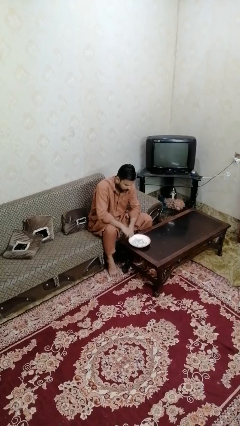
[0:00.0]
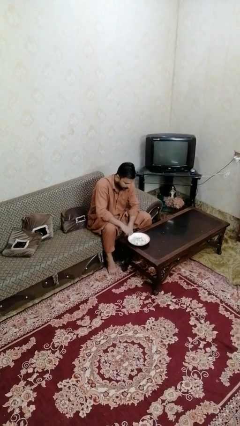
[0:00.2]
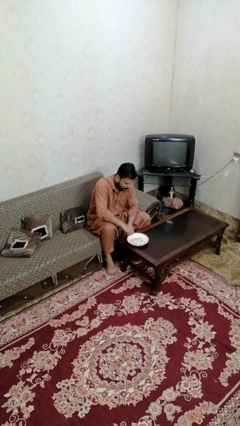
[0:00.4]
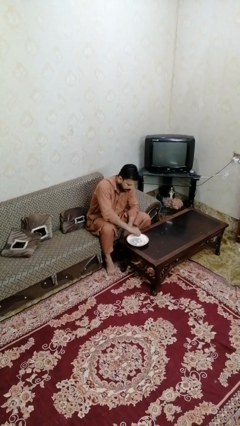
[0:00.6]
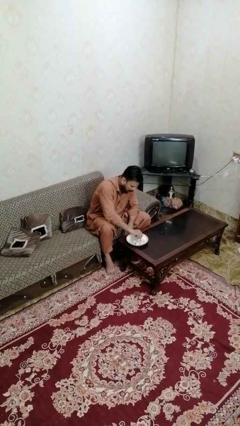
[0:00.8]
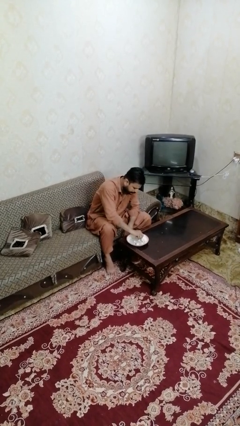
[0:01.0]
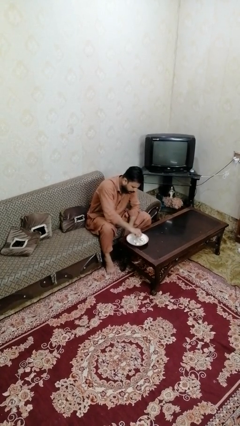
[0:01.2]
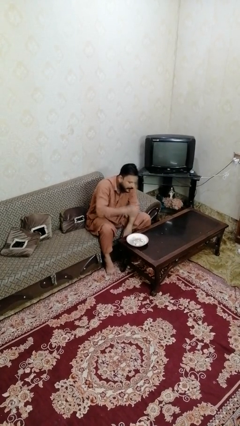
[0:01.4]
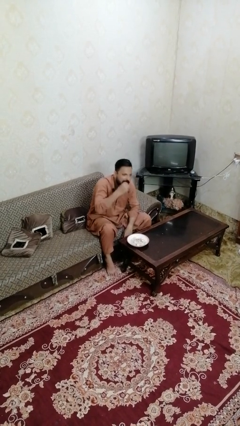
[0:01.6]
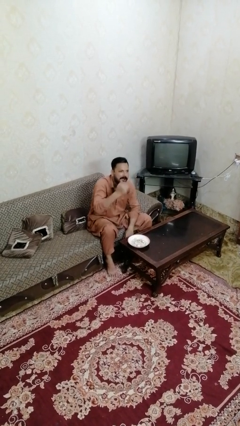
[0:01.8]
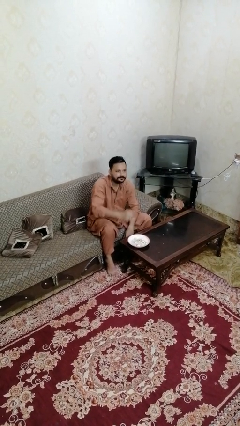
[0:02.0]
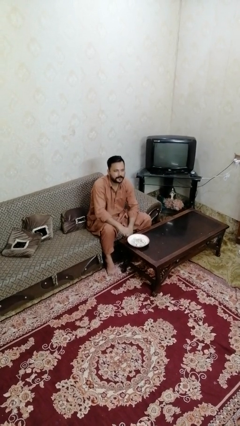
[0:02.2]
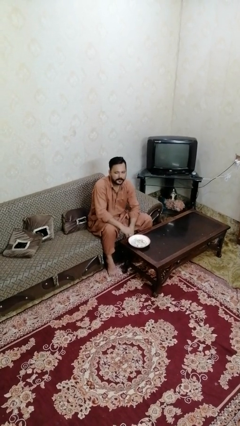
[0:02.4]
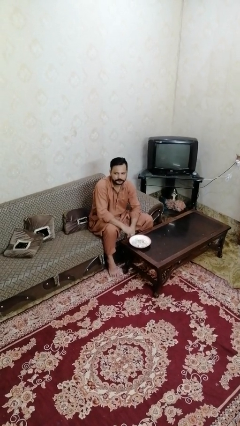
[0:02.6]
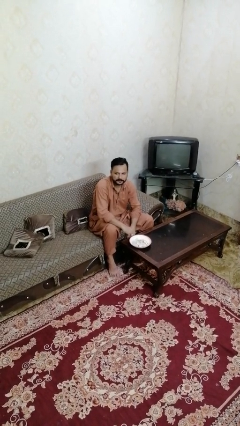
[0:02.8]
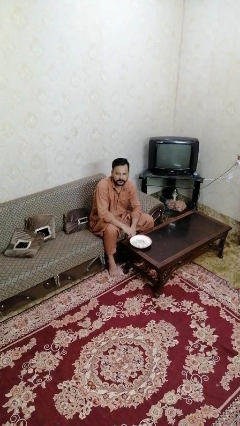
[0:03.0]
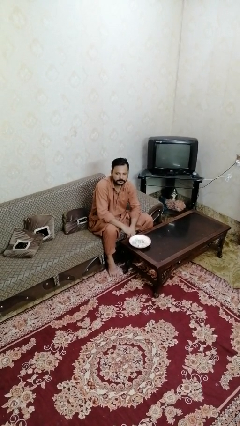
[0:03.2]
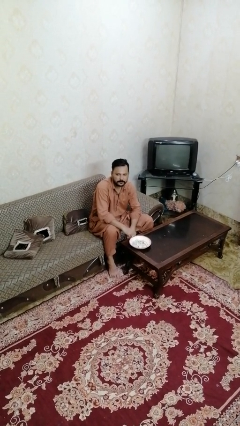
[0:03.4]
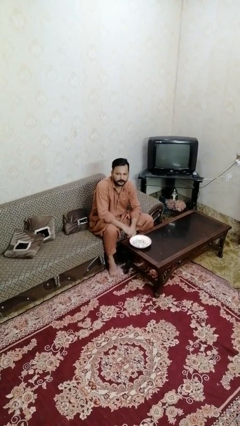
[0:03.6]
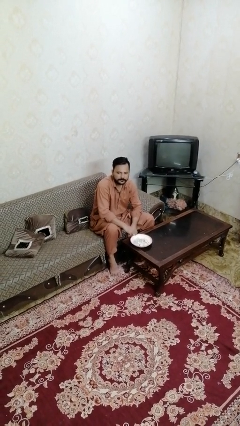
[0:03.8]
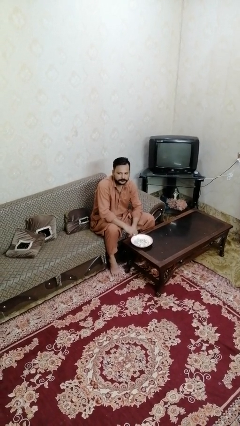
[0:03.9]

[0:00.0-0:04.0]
person eats with hands

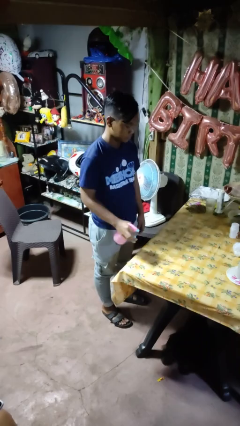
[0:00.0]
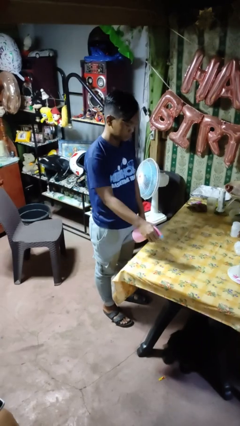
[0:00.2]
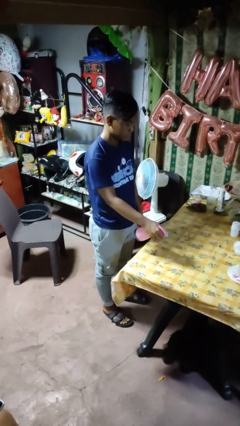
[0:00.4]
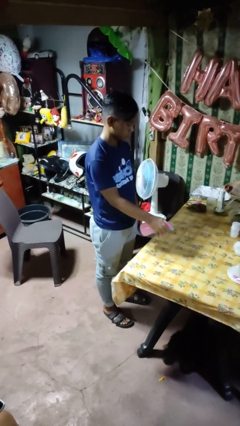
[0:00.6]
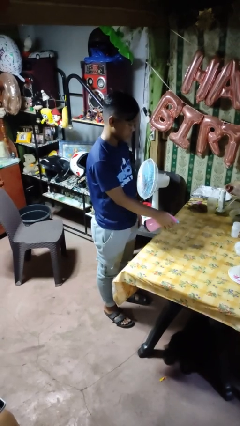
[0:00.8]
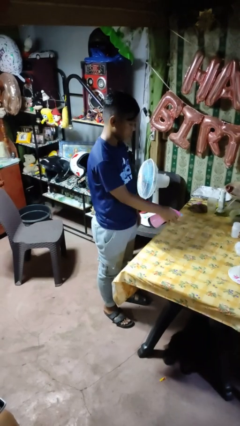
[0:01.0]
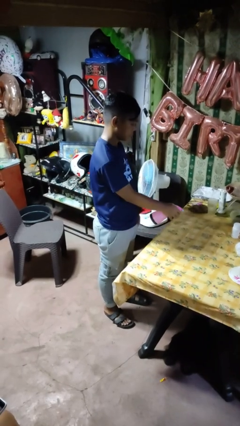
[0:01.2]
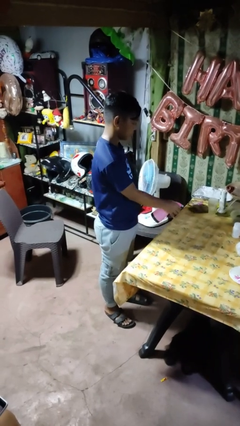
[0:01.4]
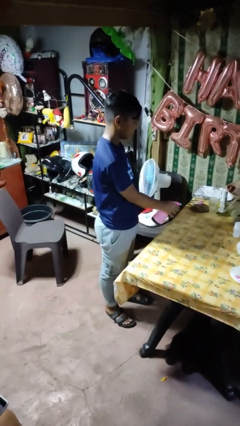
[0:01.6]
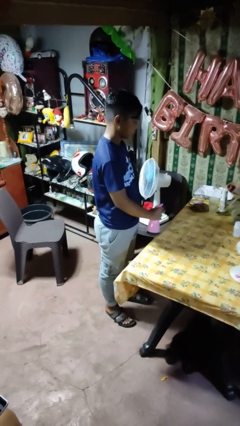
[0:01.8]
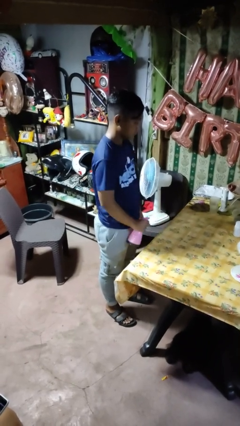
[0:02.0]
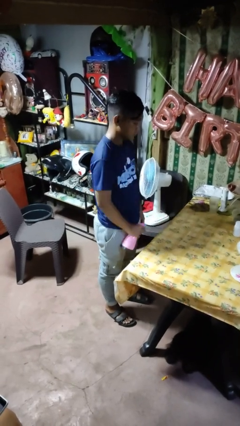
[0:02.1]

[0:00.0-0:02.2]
person sprays from bottle

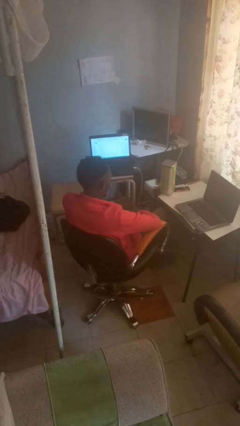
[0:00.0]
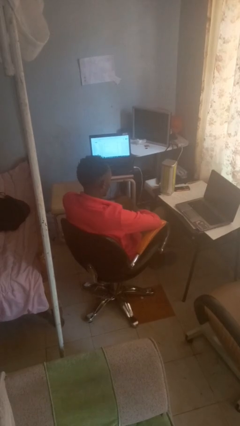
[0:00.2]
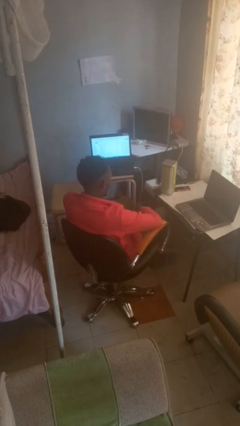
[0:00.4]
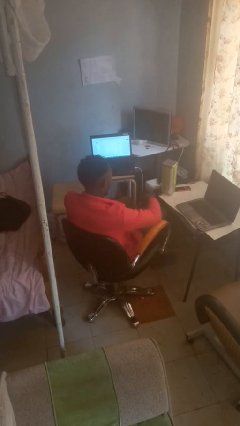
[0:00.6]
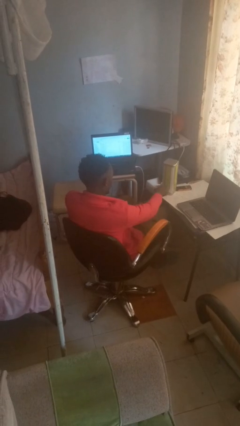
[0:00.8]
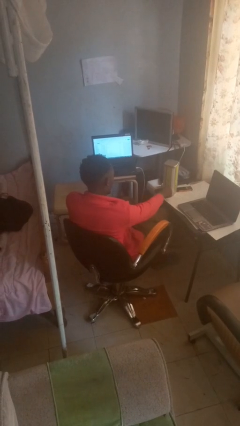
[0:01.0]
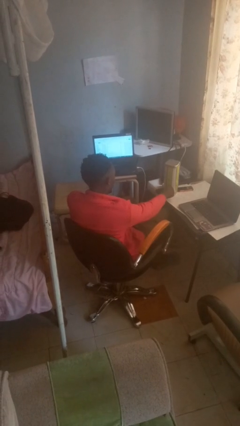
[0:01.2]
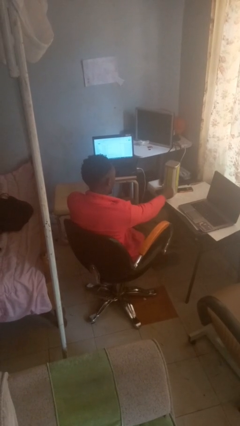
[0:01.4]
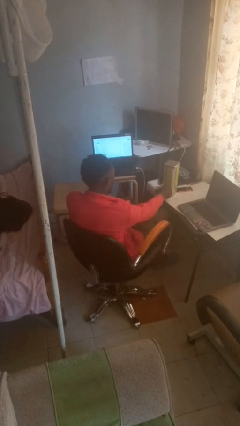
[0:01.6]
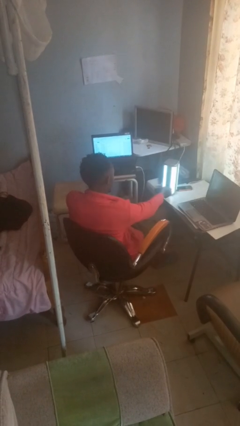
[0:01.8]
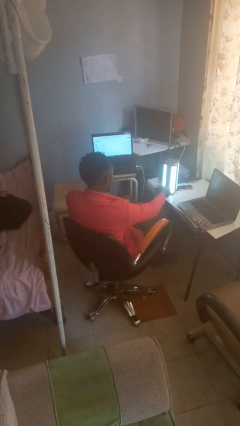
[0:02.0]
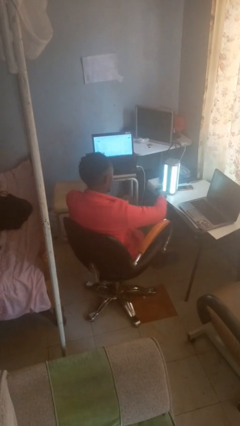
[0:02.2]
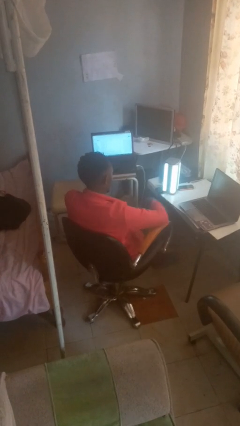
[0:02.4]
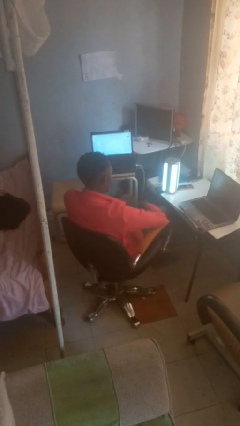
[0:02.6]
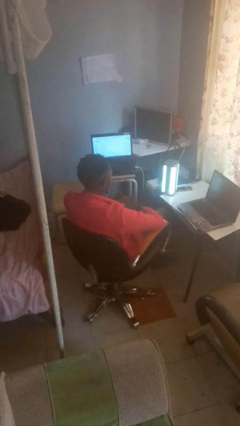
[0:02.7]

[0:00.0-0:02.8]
person turns on lamp

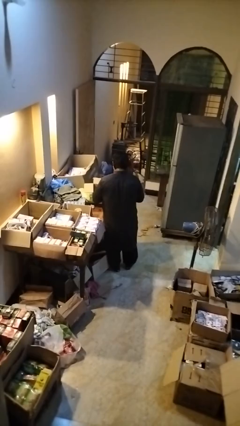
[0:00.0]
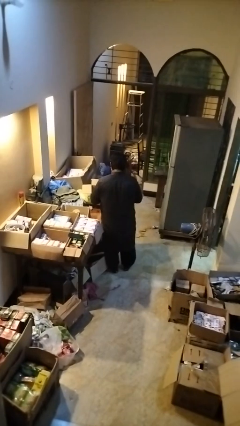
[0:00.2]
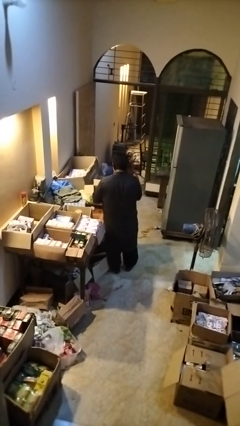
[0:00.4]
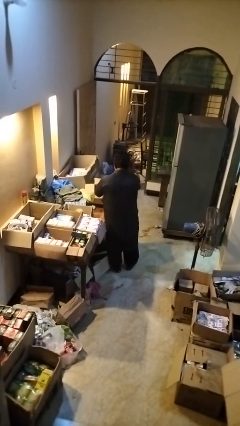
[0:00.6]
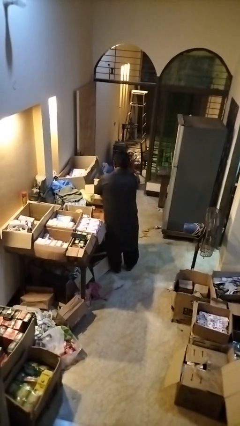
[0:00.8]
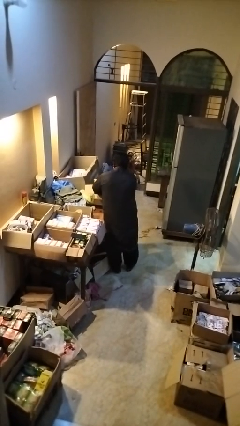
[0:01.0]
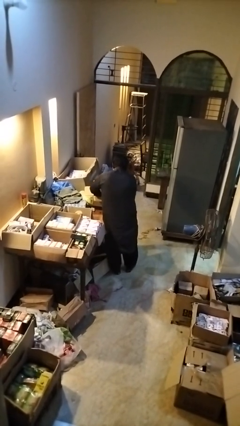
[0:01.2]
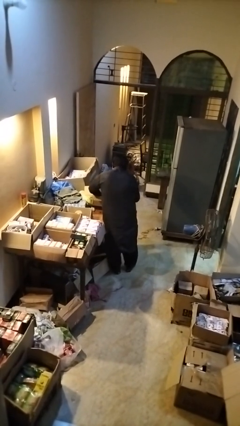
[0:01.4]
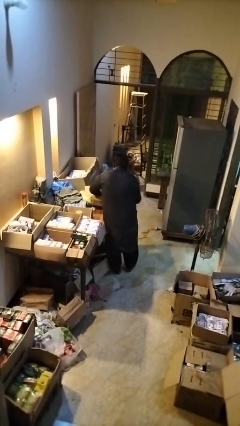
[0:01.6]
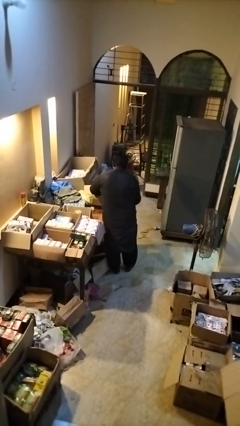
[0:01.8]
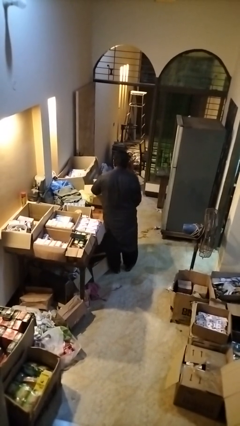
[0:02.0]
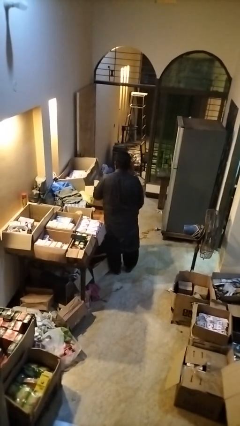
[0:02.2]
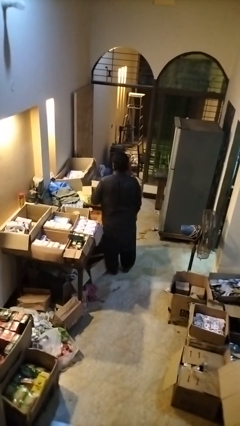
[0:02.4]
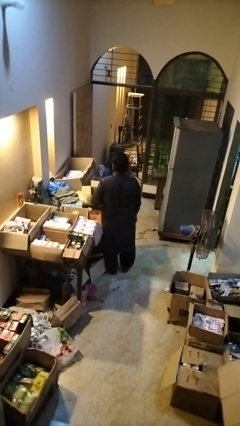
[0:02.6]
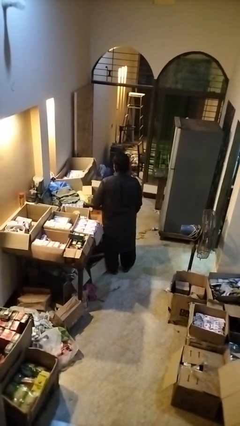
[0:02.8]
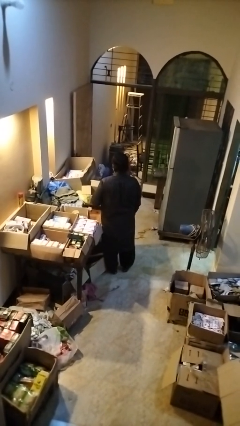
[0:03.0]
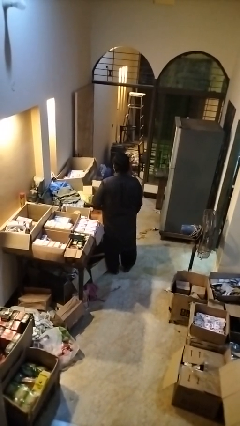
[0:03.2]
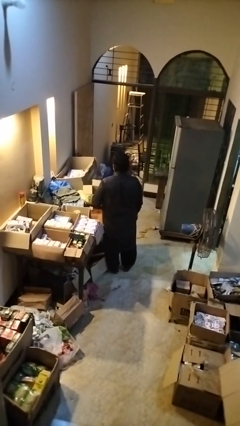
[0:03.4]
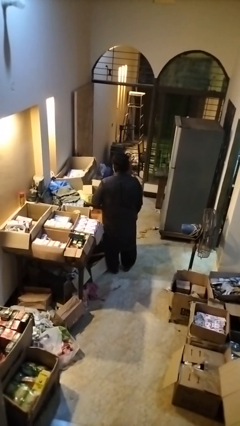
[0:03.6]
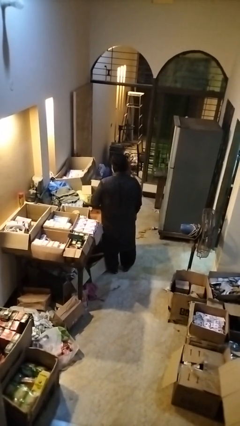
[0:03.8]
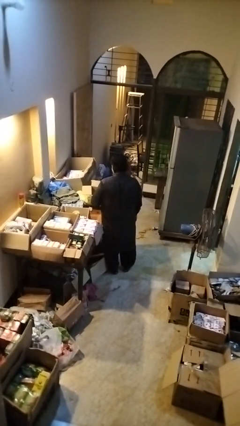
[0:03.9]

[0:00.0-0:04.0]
person takes object from box

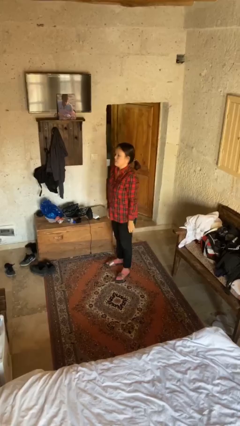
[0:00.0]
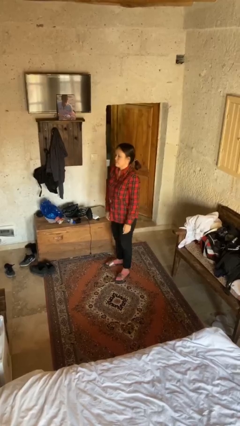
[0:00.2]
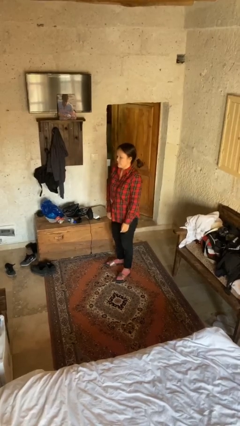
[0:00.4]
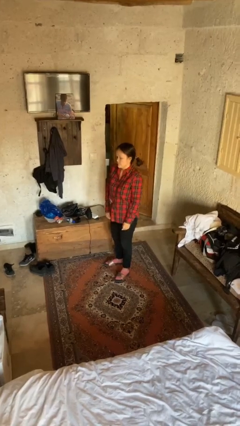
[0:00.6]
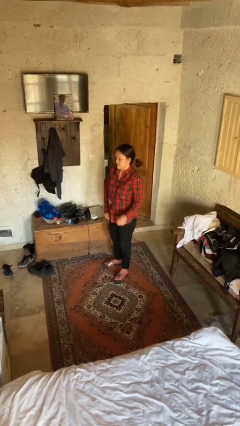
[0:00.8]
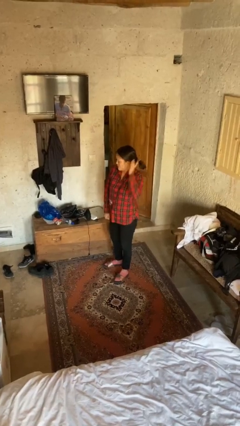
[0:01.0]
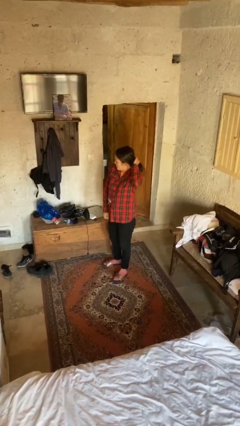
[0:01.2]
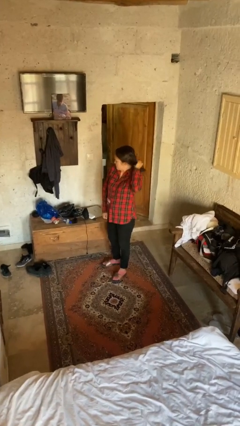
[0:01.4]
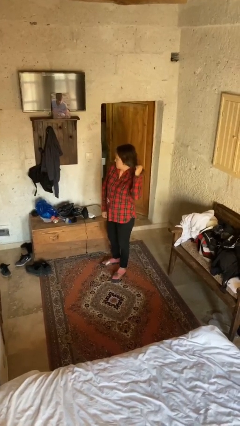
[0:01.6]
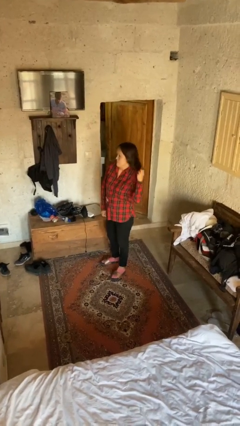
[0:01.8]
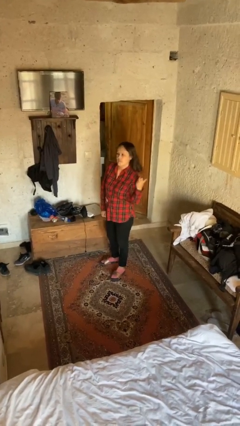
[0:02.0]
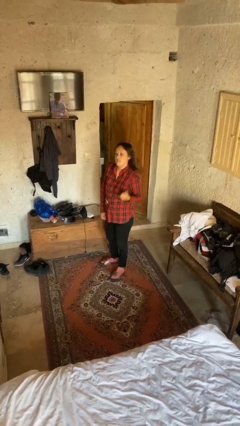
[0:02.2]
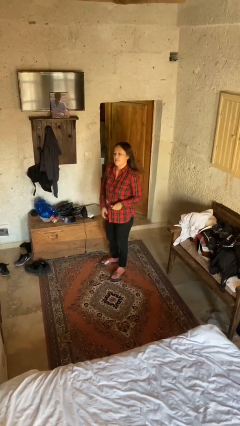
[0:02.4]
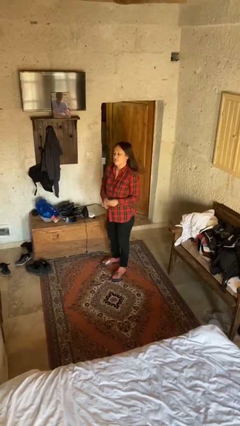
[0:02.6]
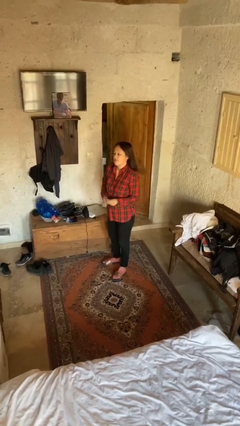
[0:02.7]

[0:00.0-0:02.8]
person takes off hairtie

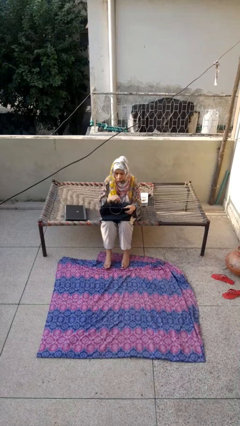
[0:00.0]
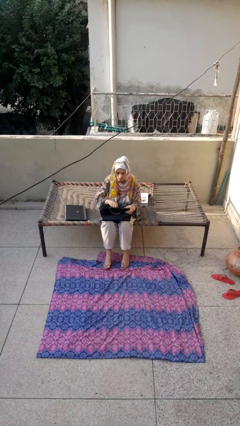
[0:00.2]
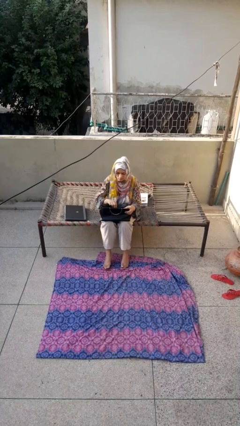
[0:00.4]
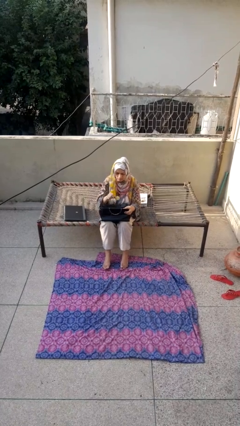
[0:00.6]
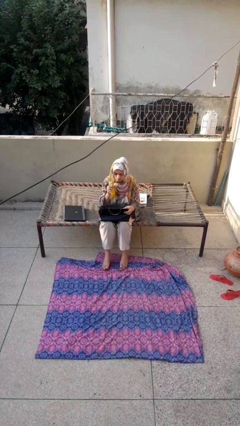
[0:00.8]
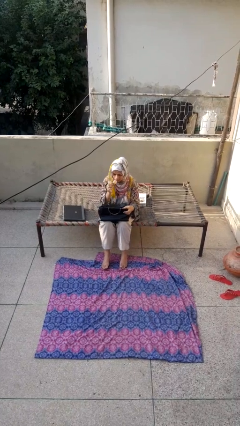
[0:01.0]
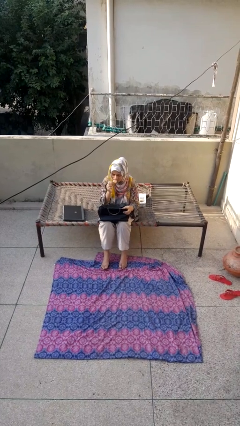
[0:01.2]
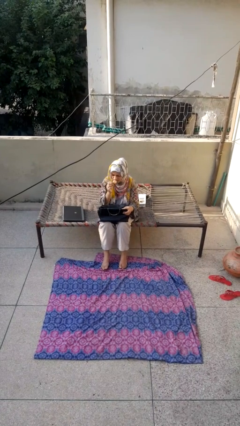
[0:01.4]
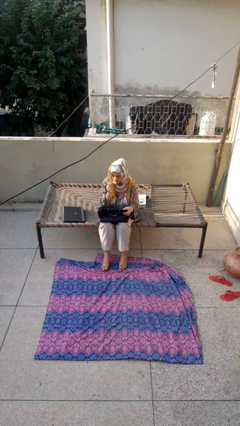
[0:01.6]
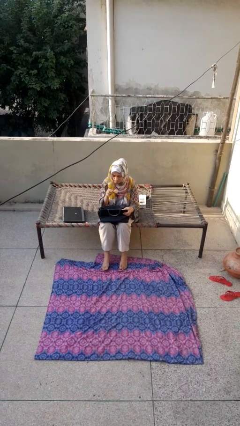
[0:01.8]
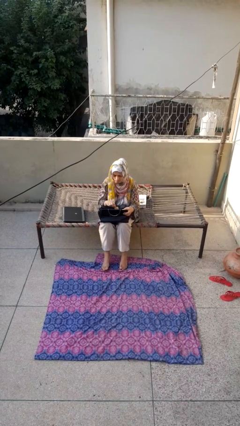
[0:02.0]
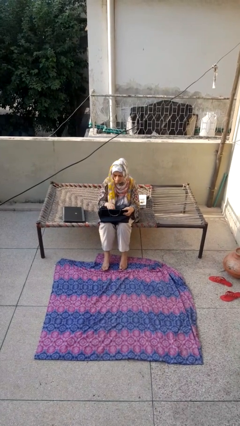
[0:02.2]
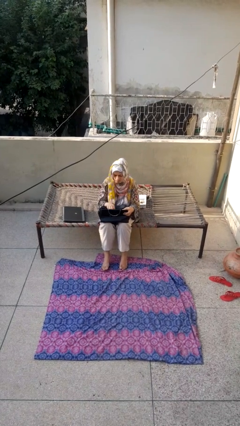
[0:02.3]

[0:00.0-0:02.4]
person eats snack from bag
